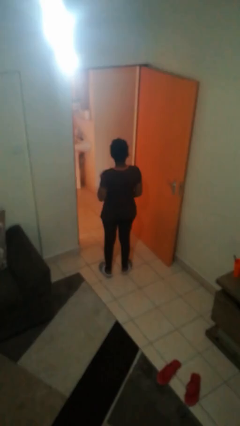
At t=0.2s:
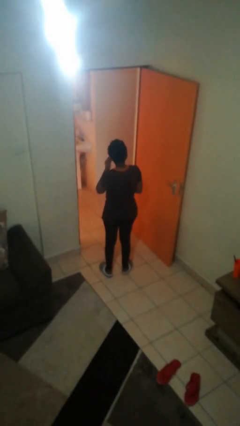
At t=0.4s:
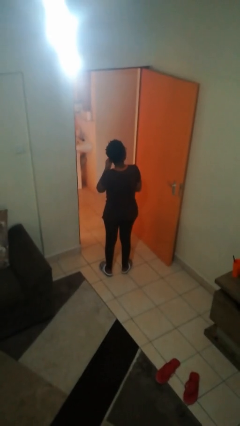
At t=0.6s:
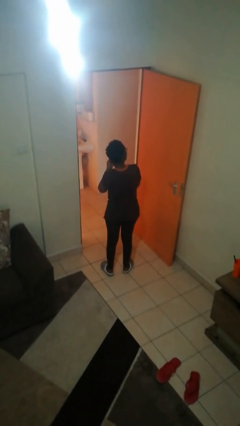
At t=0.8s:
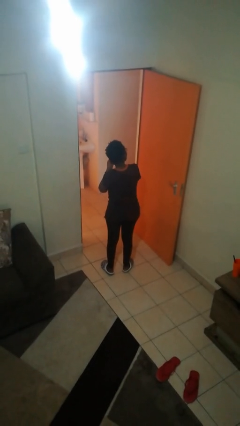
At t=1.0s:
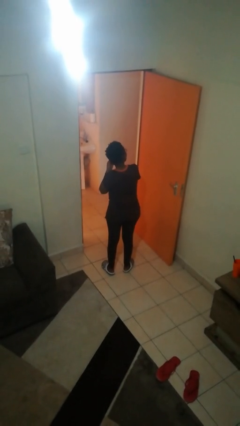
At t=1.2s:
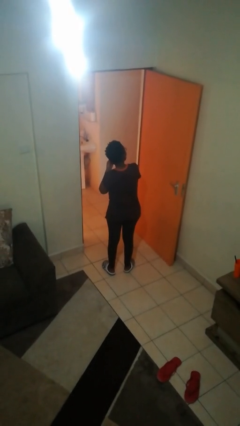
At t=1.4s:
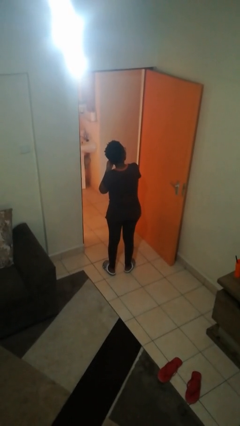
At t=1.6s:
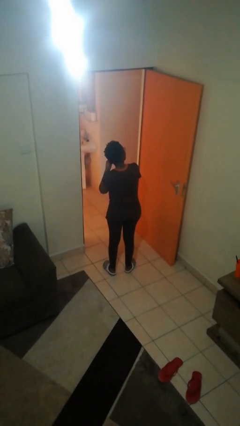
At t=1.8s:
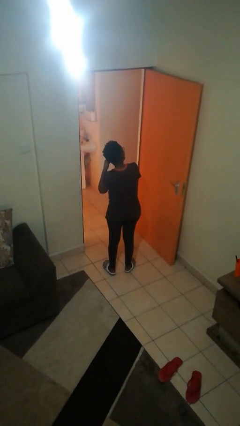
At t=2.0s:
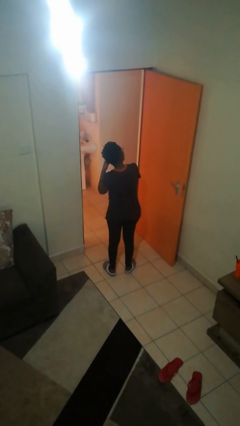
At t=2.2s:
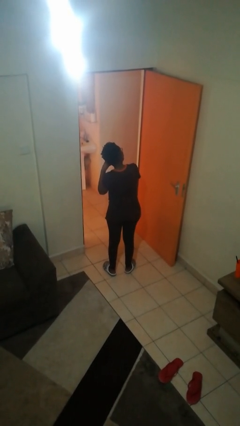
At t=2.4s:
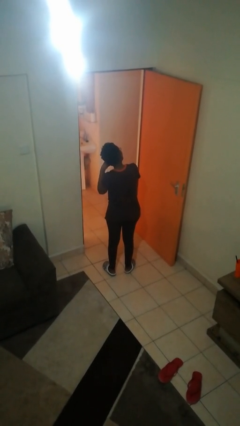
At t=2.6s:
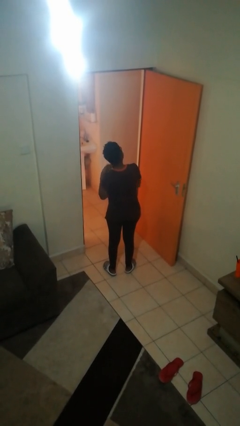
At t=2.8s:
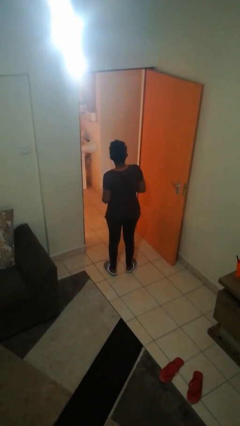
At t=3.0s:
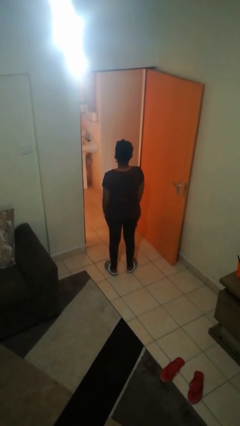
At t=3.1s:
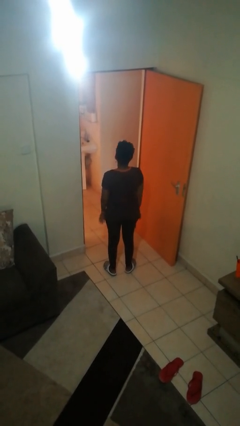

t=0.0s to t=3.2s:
person puts on earrings

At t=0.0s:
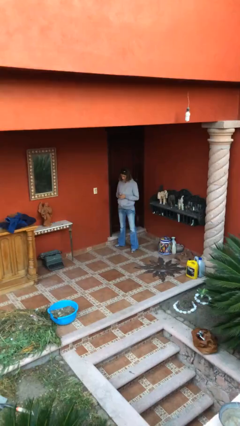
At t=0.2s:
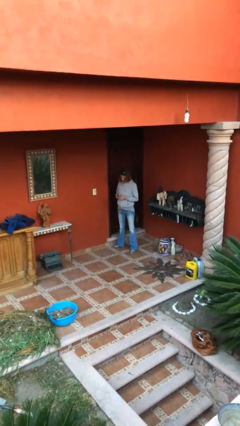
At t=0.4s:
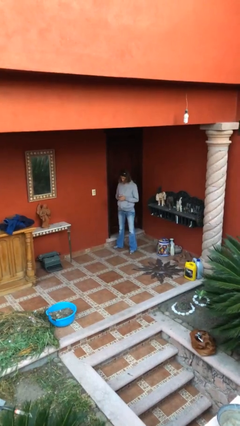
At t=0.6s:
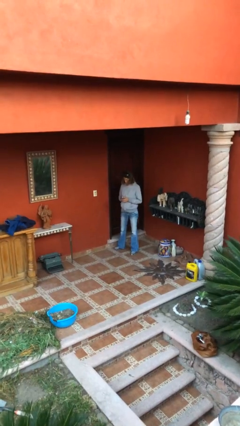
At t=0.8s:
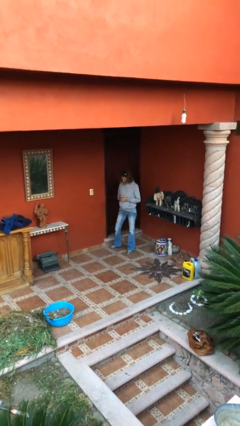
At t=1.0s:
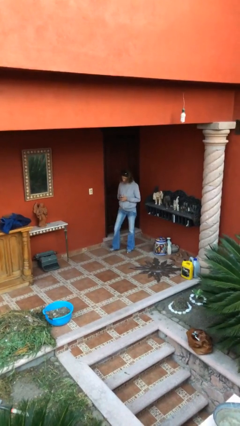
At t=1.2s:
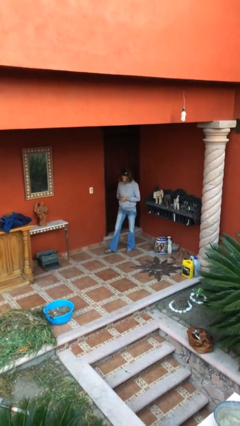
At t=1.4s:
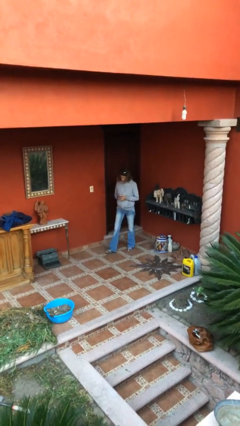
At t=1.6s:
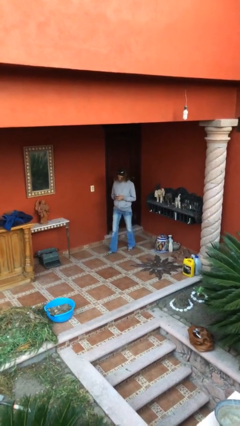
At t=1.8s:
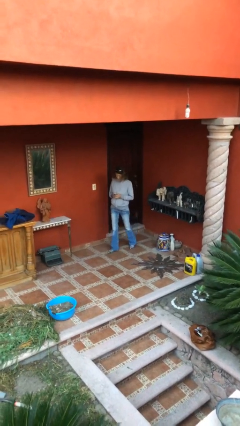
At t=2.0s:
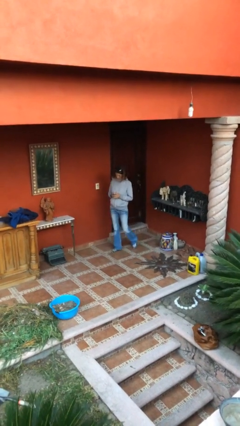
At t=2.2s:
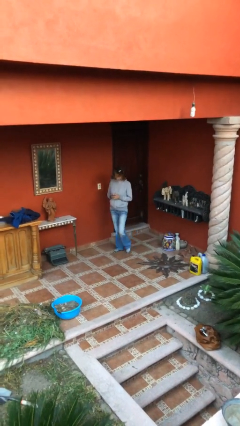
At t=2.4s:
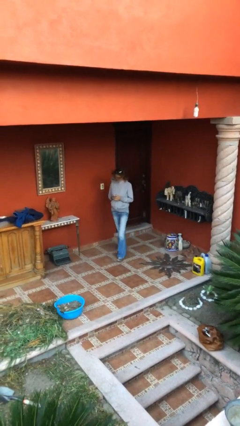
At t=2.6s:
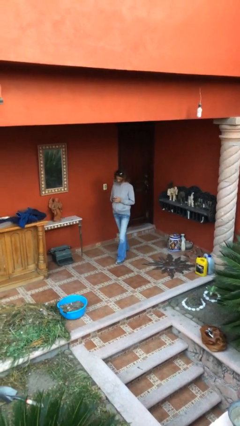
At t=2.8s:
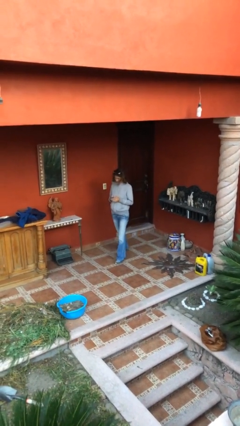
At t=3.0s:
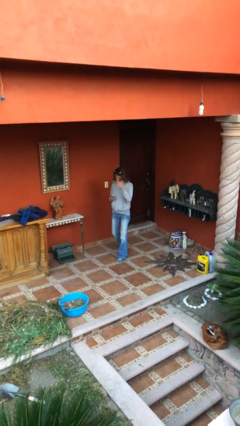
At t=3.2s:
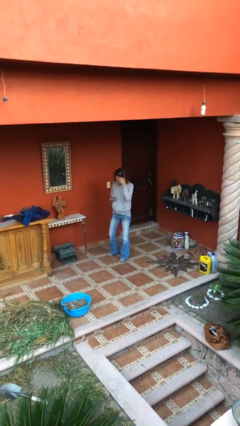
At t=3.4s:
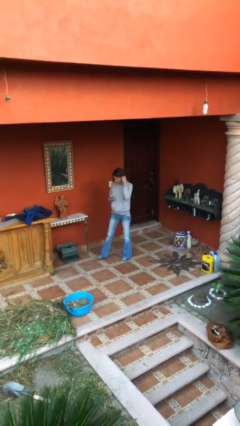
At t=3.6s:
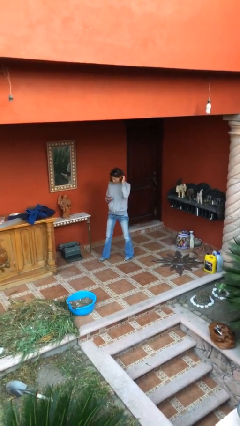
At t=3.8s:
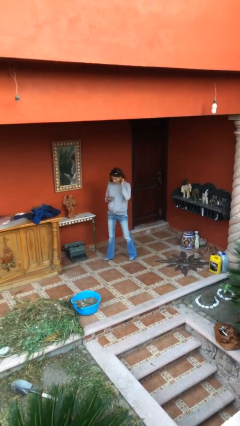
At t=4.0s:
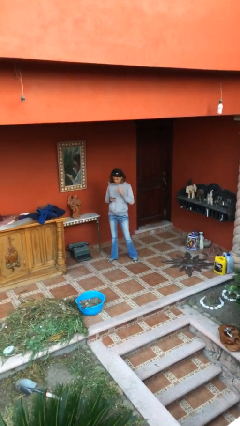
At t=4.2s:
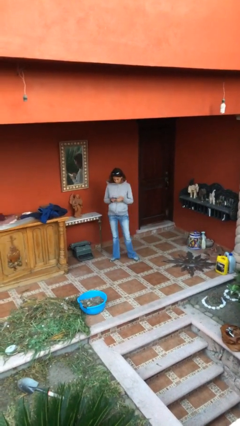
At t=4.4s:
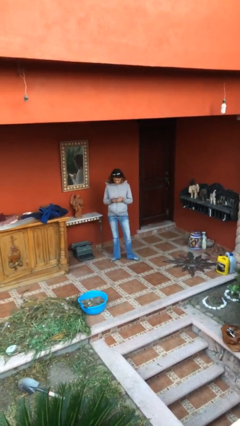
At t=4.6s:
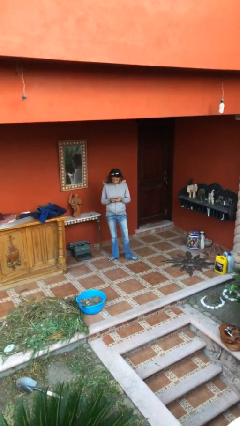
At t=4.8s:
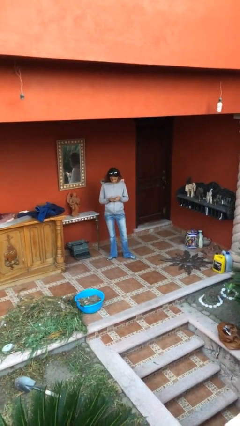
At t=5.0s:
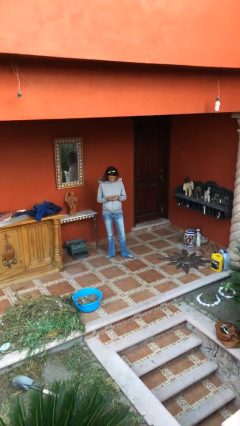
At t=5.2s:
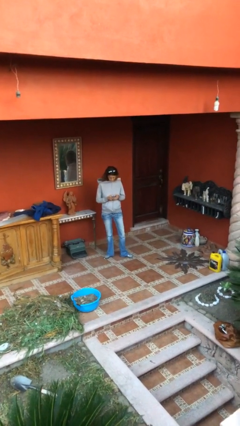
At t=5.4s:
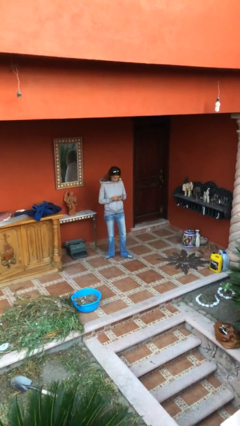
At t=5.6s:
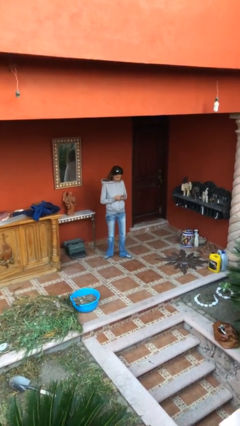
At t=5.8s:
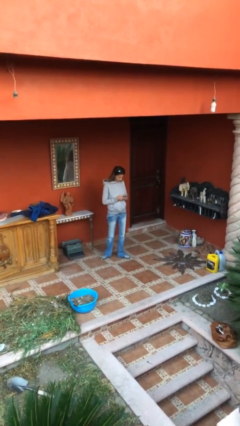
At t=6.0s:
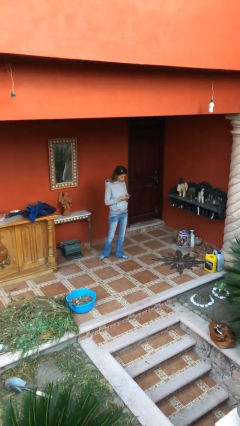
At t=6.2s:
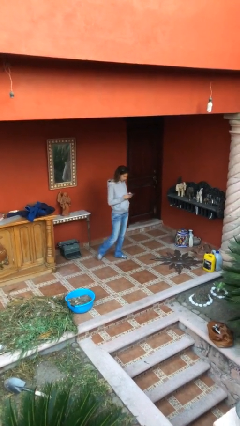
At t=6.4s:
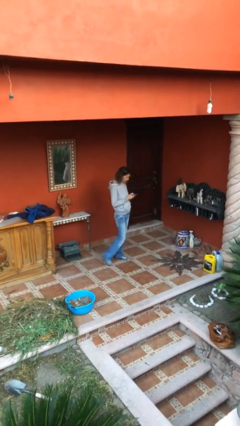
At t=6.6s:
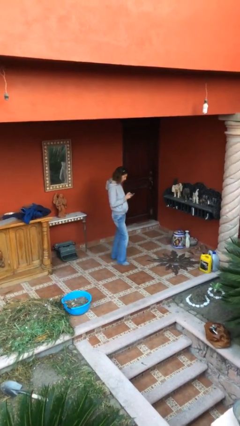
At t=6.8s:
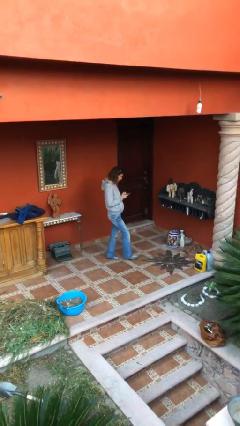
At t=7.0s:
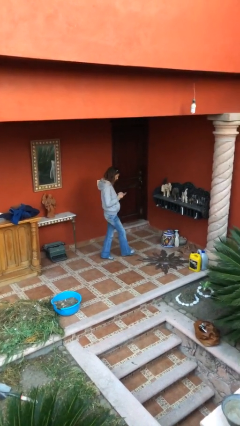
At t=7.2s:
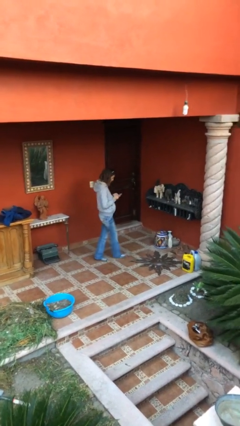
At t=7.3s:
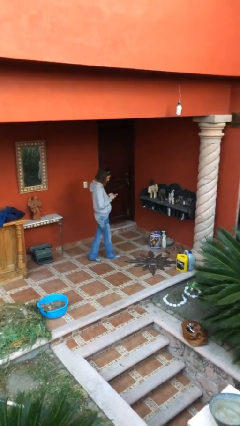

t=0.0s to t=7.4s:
person texts on phone

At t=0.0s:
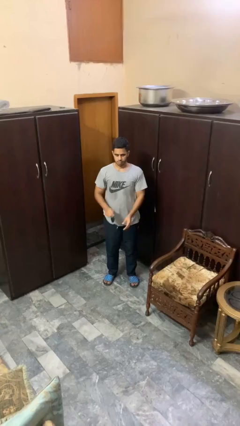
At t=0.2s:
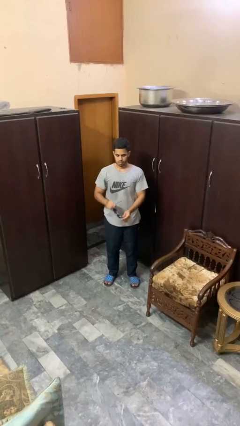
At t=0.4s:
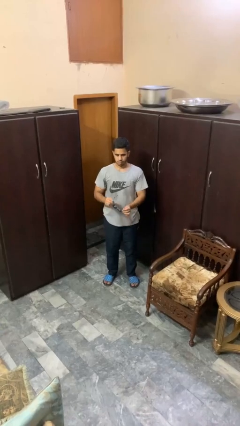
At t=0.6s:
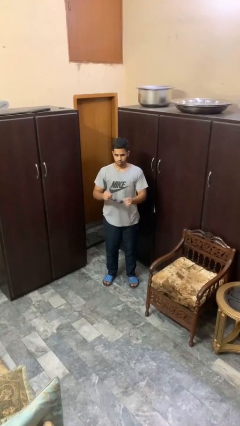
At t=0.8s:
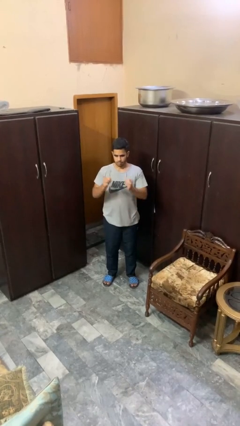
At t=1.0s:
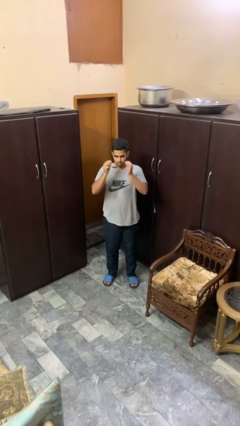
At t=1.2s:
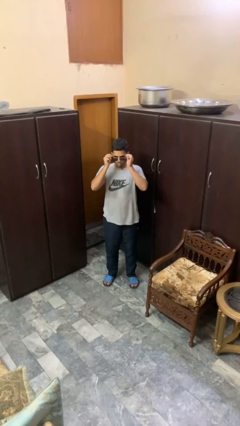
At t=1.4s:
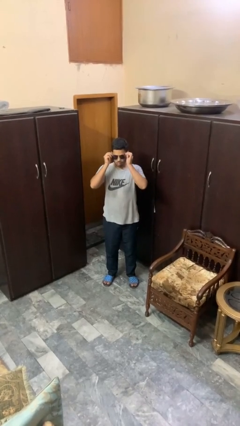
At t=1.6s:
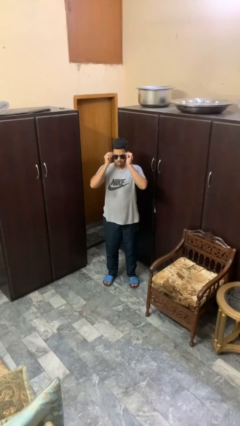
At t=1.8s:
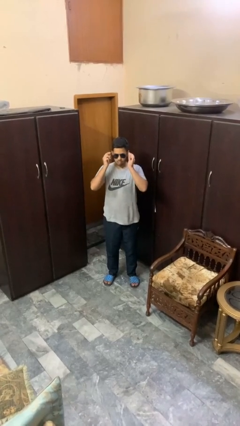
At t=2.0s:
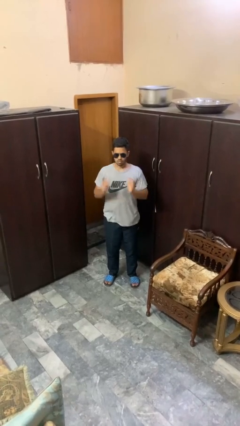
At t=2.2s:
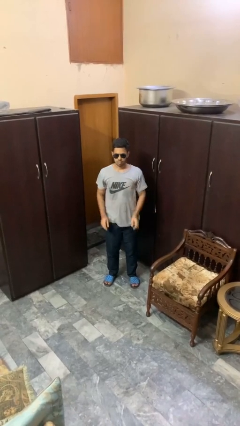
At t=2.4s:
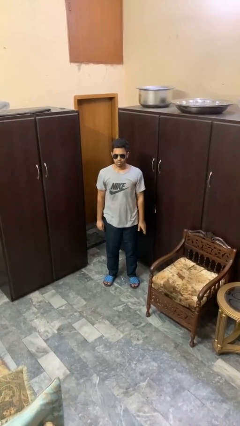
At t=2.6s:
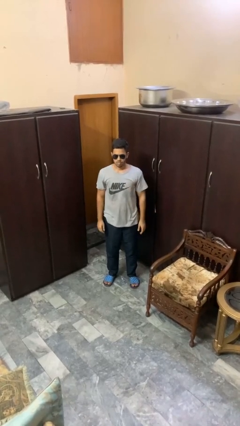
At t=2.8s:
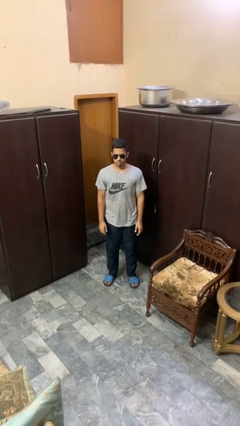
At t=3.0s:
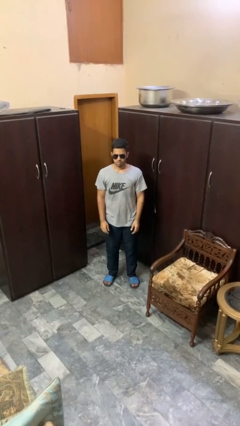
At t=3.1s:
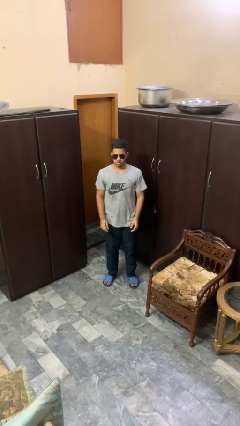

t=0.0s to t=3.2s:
person puts on sunglasses

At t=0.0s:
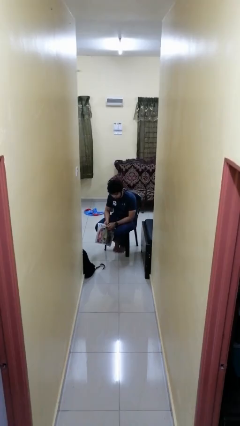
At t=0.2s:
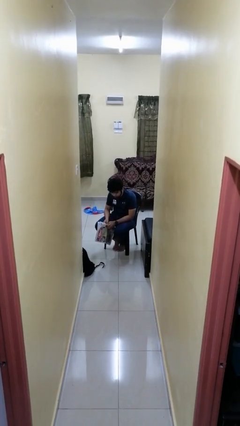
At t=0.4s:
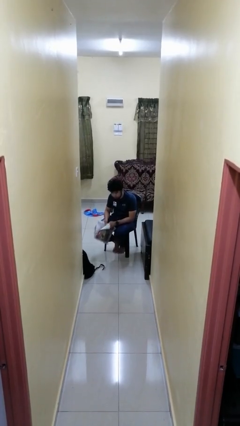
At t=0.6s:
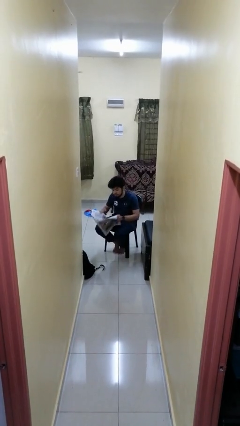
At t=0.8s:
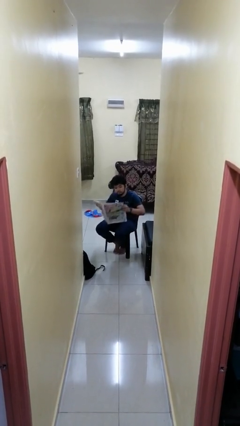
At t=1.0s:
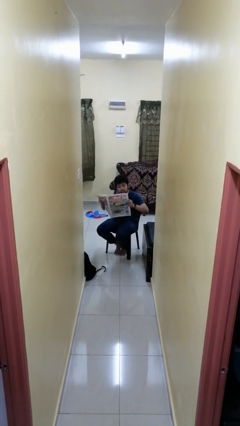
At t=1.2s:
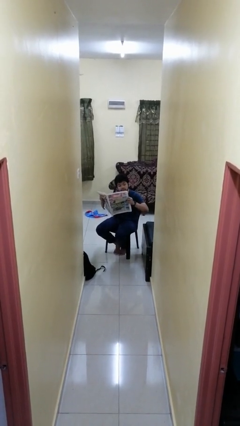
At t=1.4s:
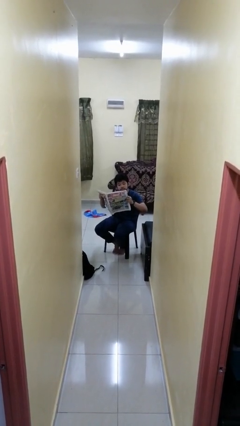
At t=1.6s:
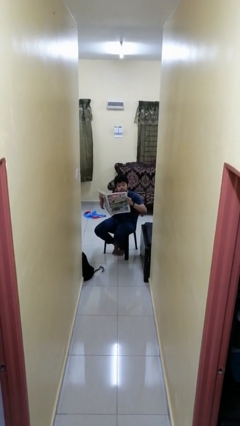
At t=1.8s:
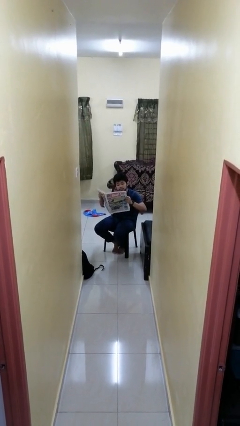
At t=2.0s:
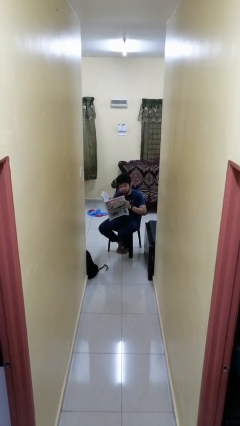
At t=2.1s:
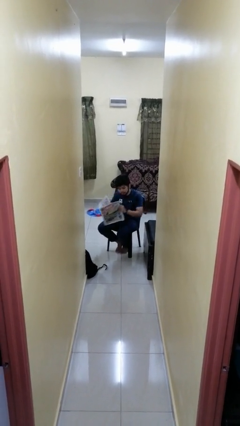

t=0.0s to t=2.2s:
person reads newspaper

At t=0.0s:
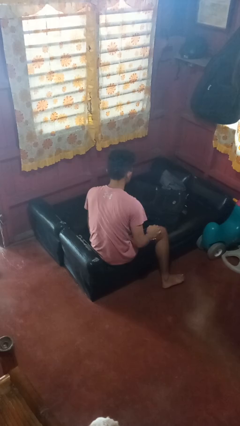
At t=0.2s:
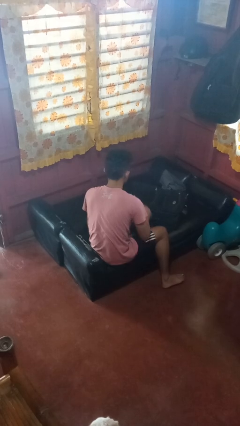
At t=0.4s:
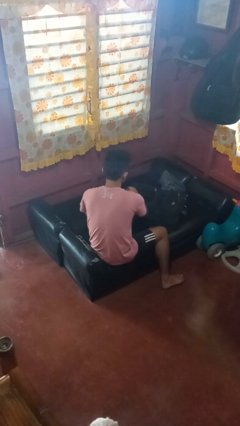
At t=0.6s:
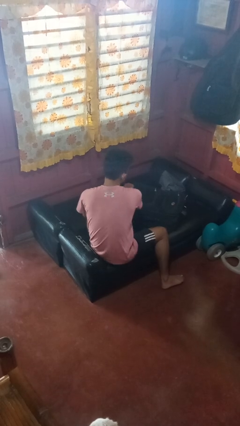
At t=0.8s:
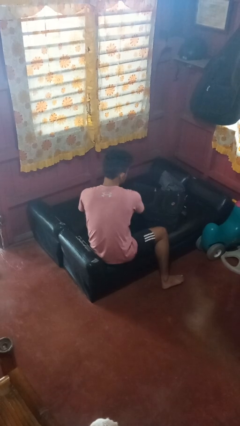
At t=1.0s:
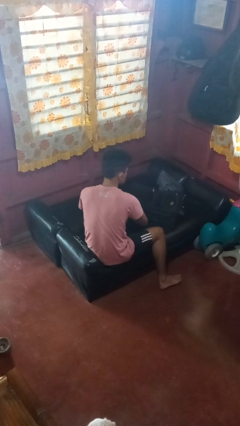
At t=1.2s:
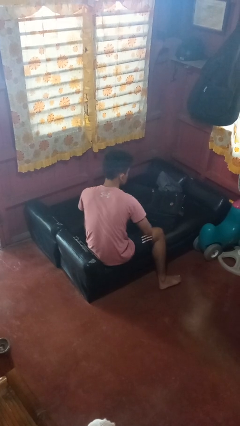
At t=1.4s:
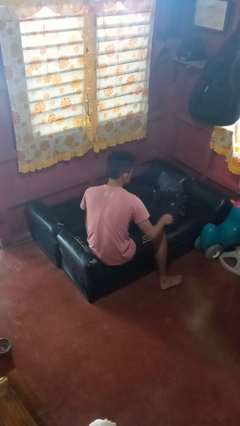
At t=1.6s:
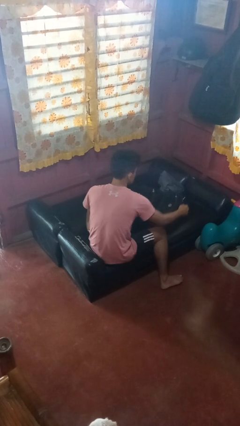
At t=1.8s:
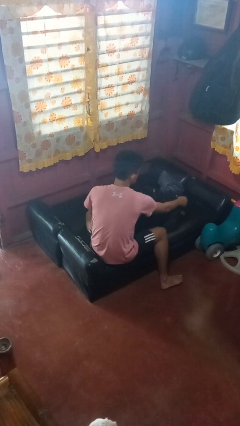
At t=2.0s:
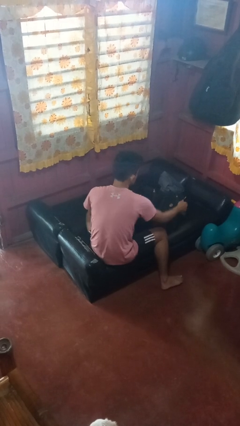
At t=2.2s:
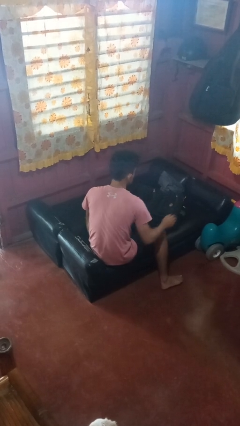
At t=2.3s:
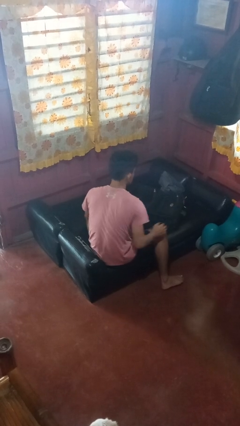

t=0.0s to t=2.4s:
person closes suitcase
